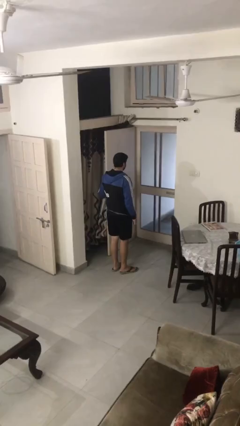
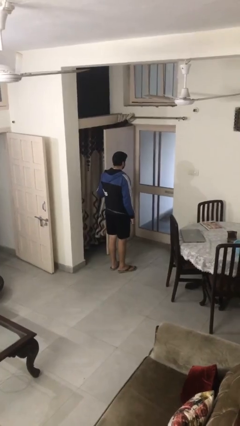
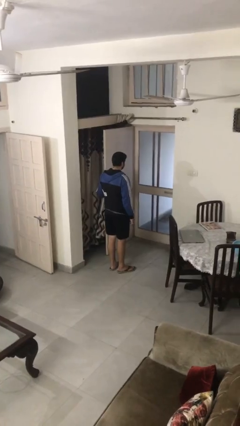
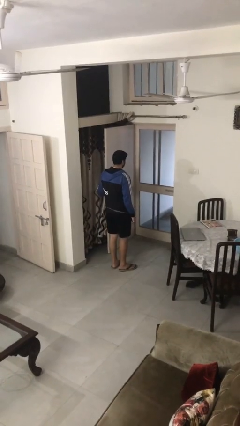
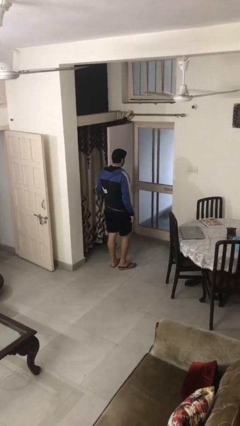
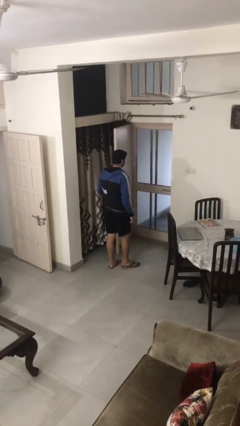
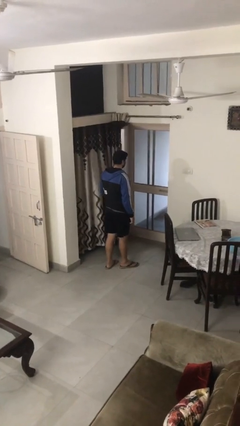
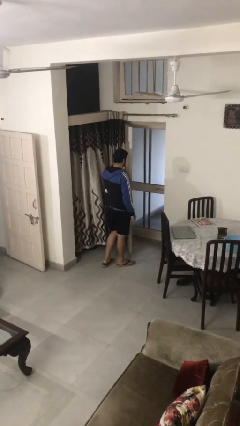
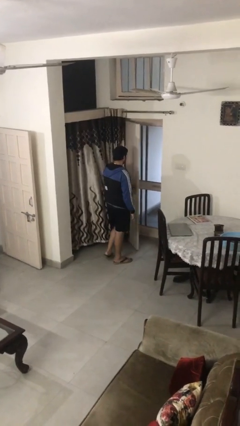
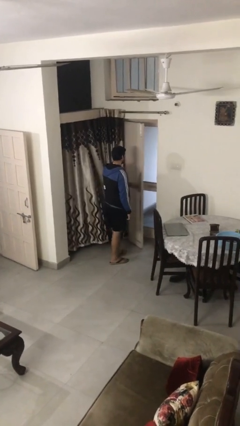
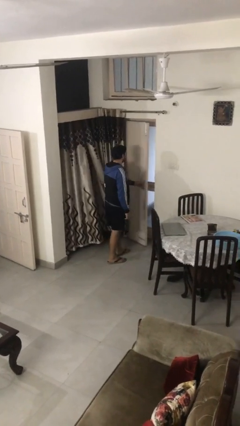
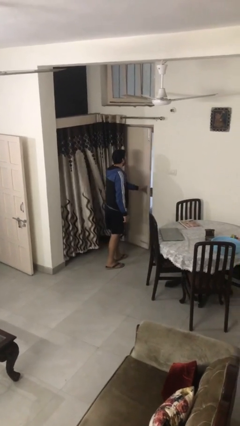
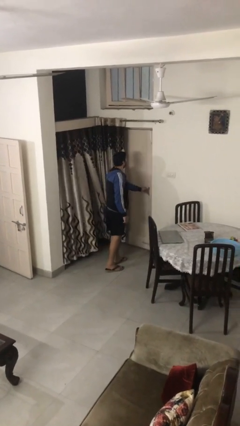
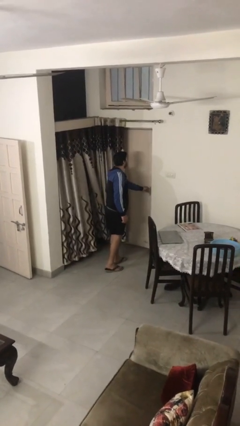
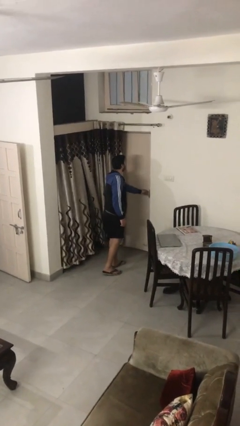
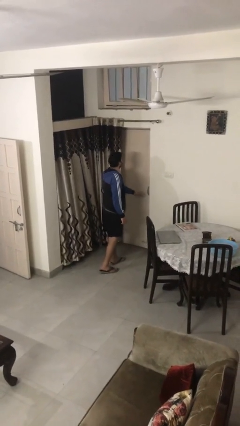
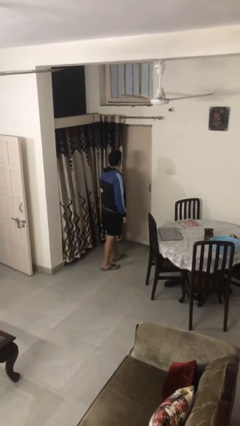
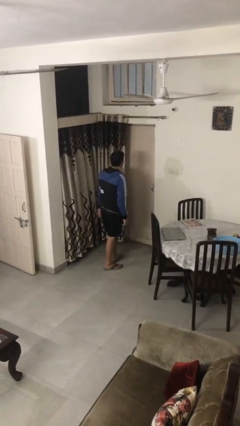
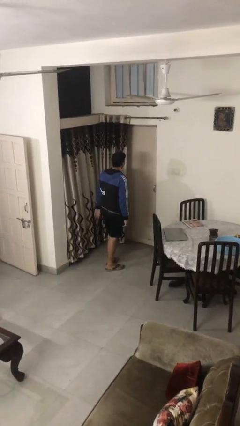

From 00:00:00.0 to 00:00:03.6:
person closes facility door

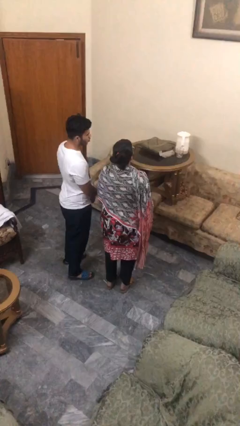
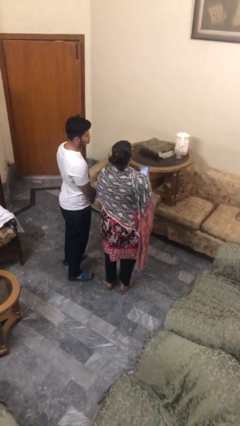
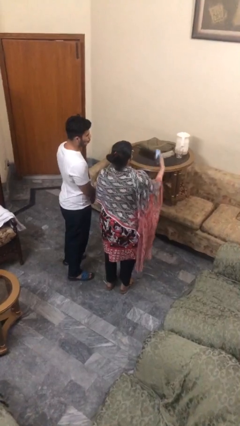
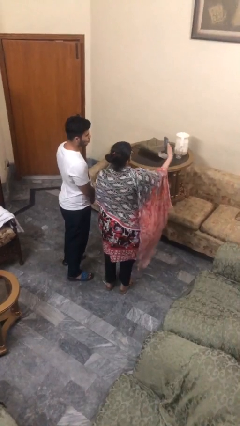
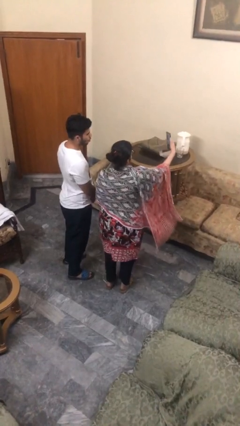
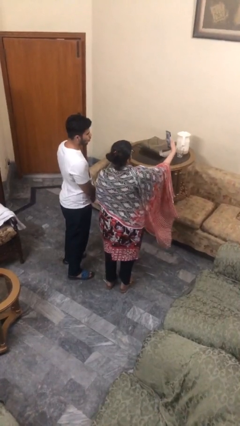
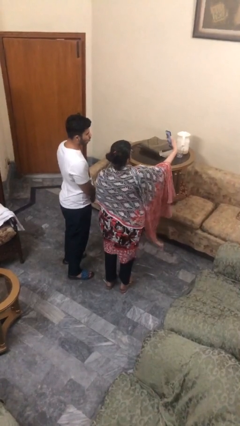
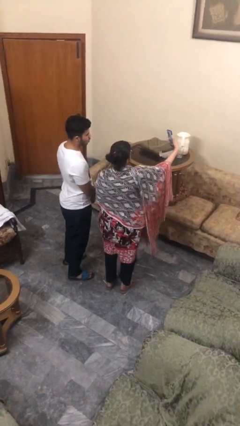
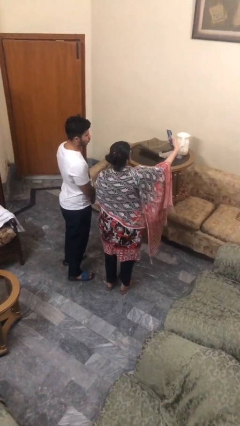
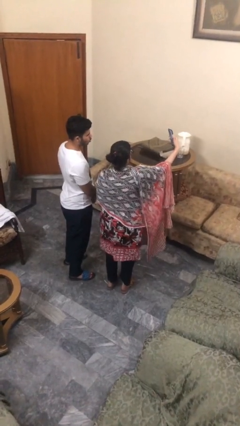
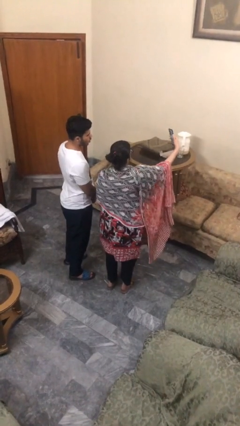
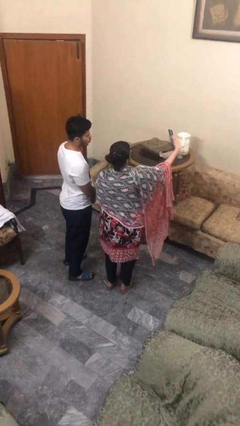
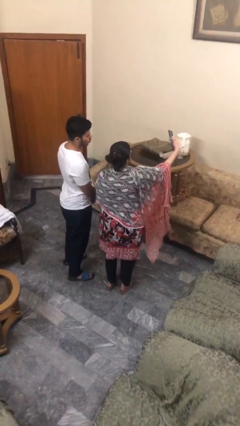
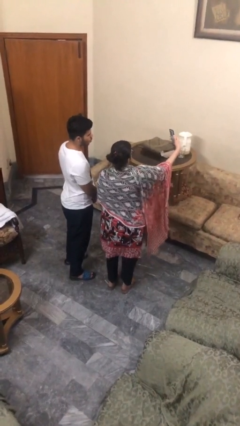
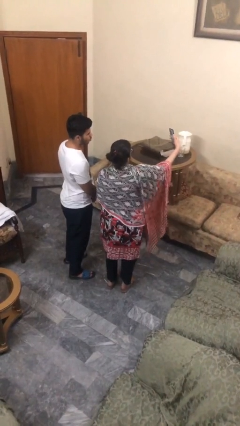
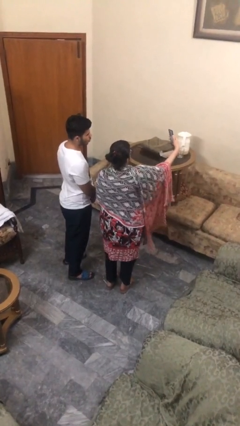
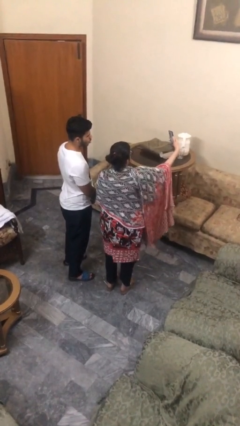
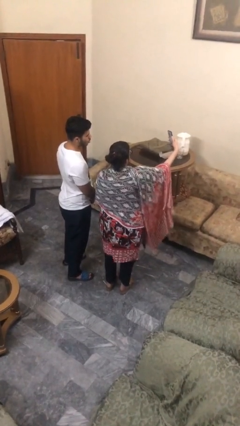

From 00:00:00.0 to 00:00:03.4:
person takes selfie with person

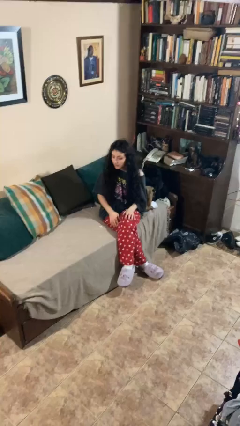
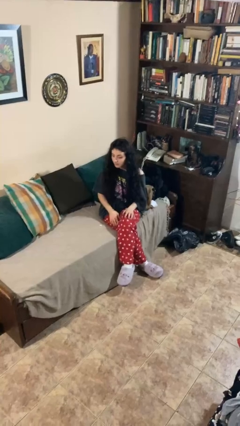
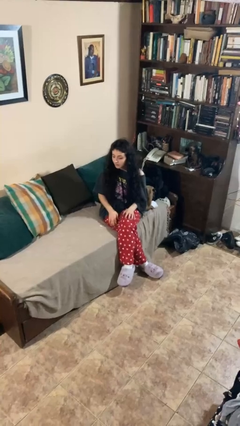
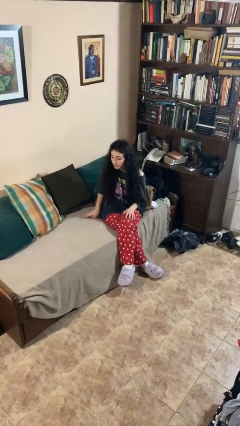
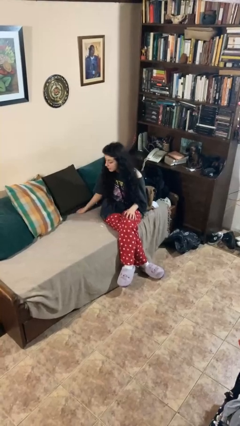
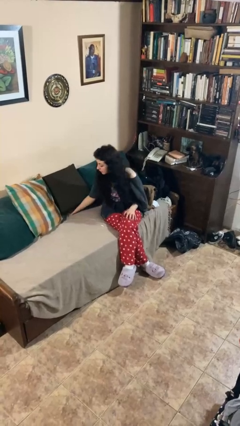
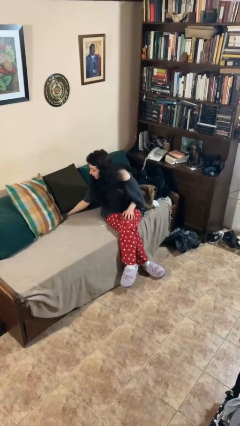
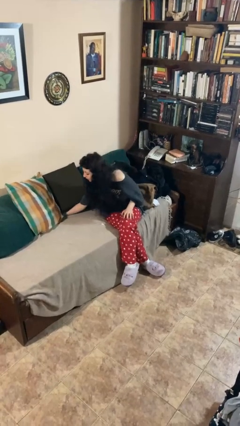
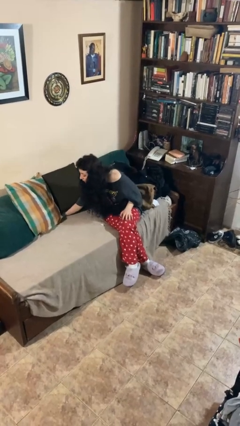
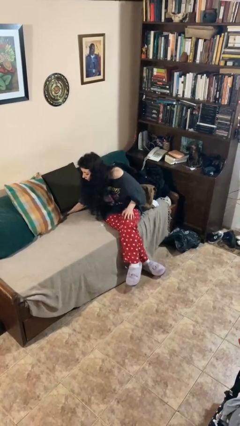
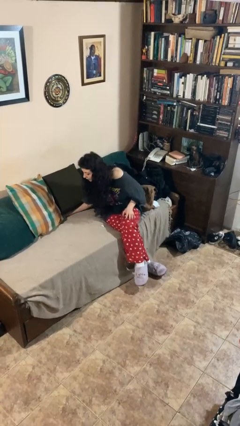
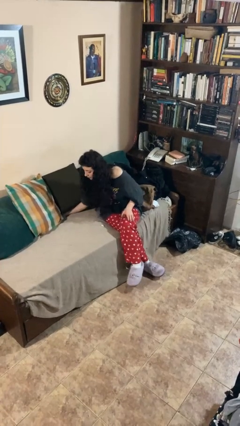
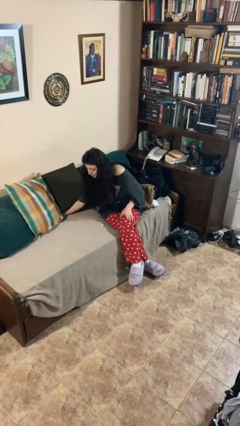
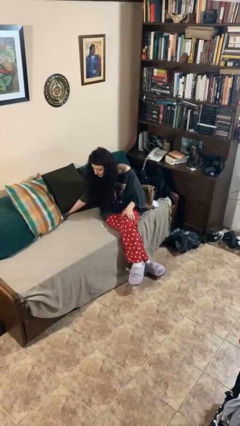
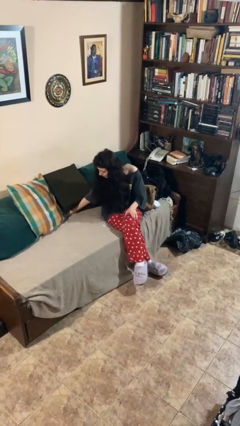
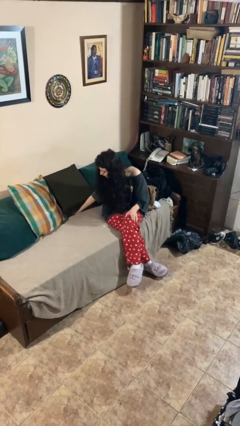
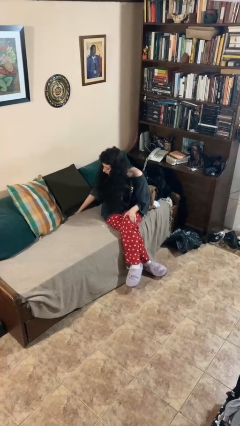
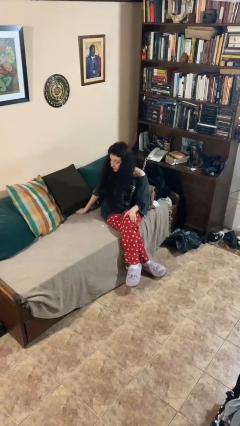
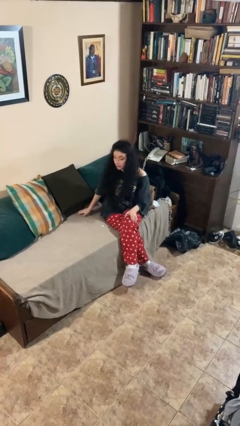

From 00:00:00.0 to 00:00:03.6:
person searches in couch

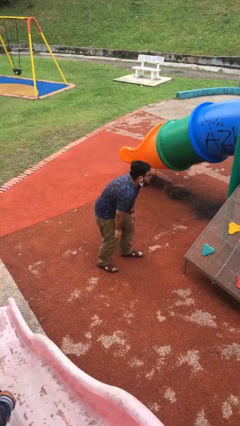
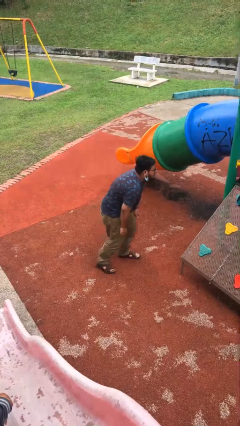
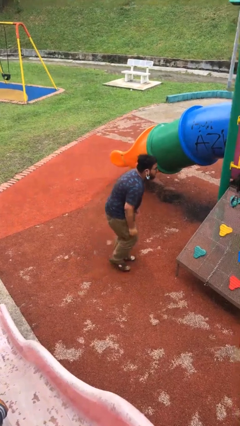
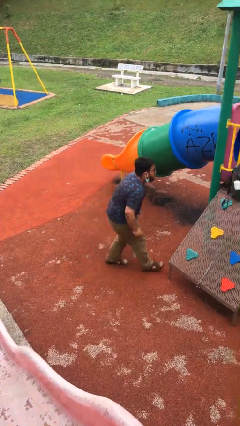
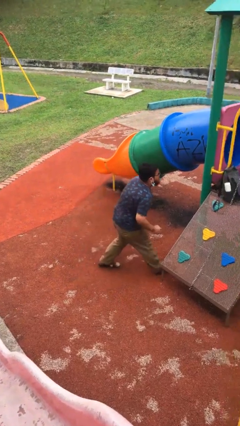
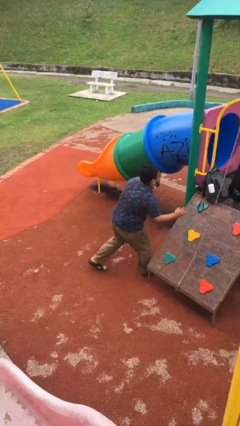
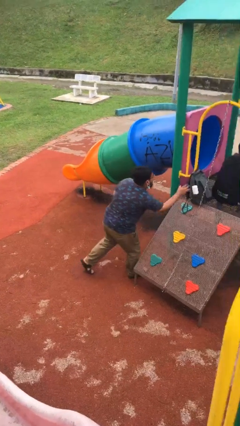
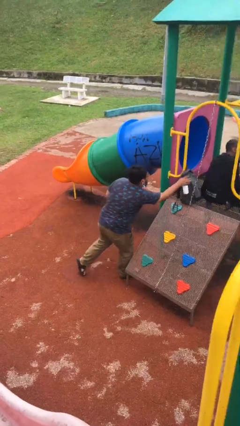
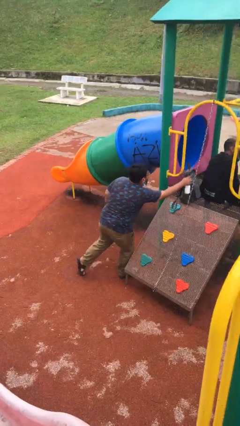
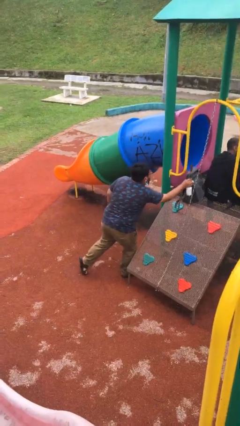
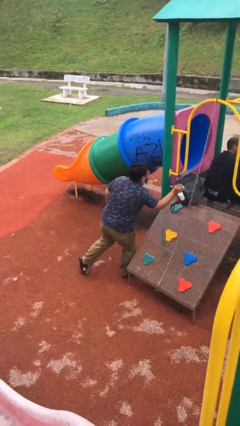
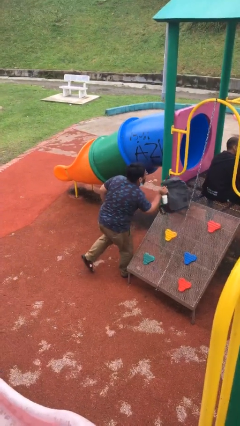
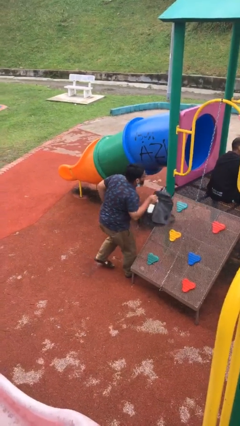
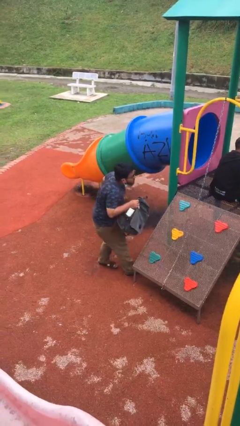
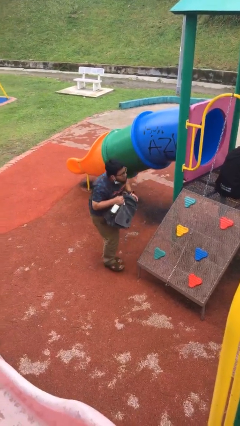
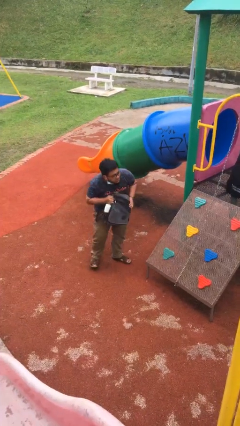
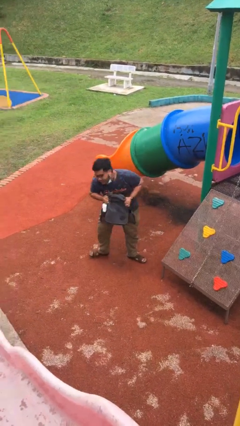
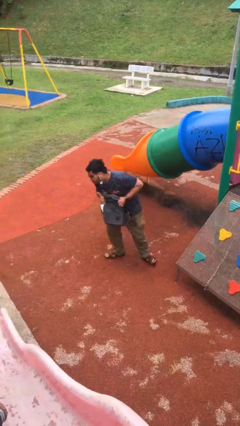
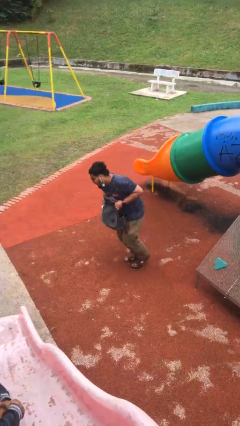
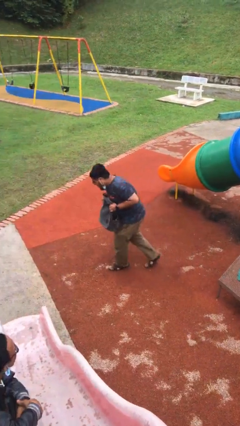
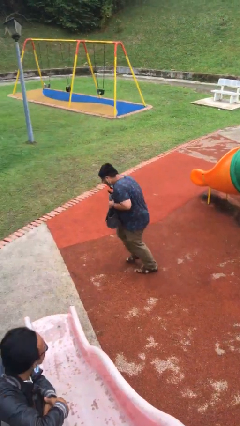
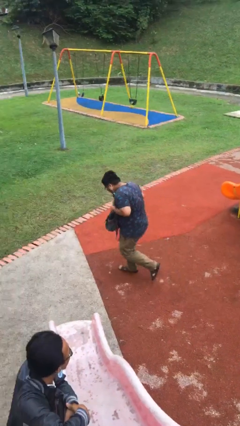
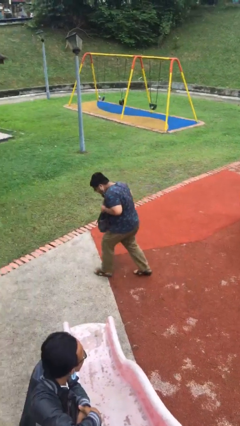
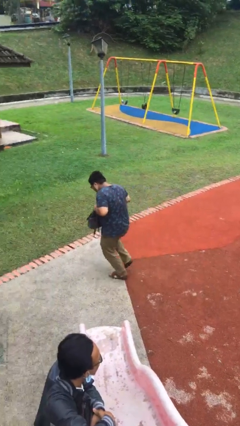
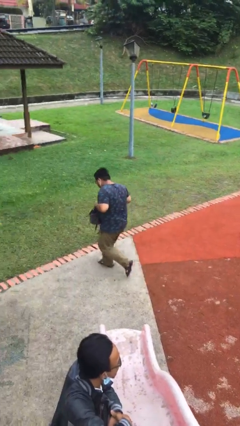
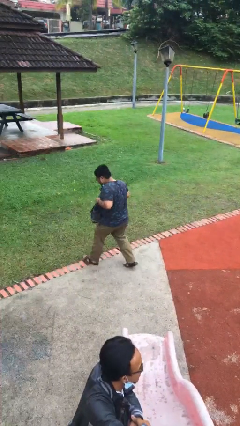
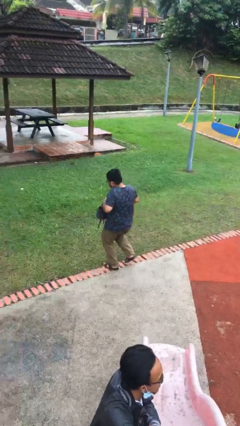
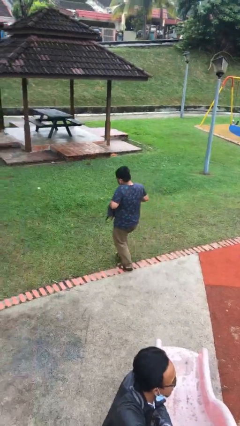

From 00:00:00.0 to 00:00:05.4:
person steals object from person

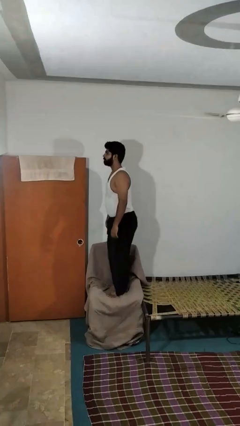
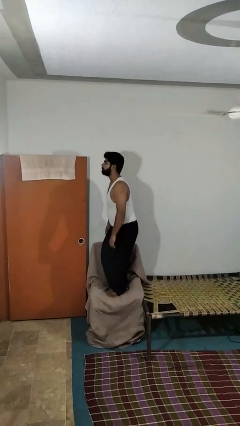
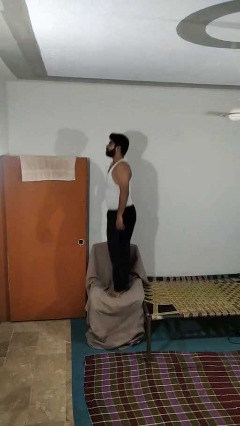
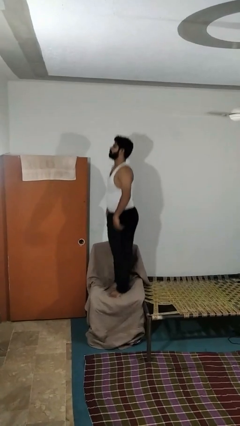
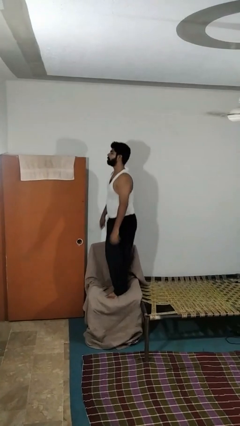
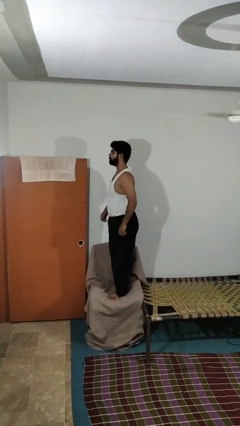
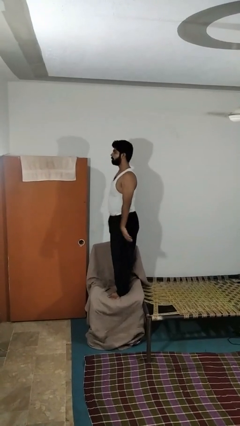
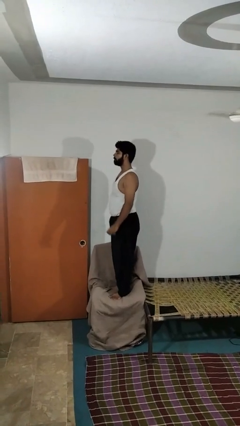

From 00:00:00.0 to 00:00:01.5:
person jumps on couch

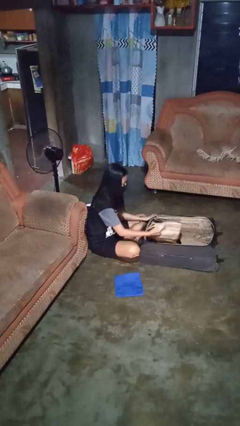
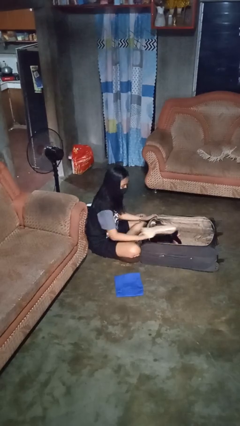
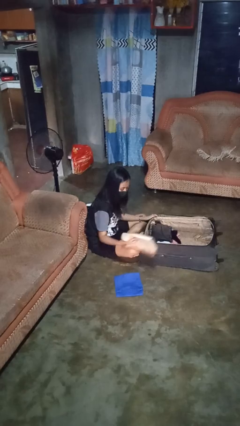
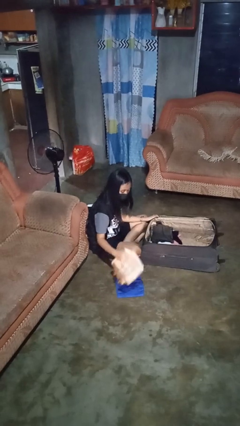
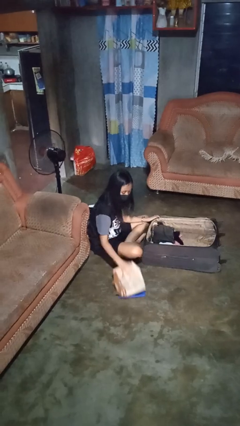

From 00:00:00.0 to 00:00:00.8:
person unloads clothes from suitcase
